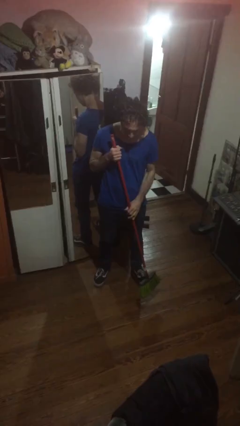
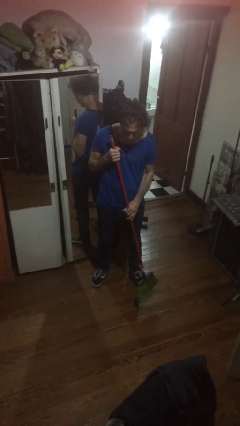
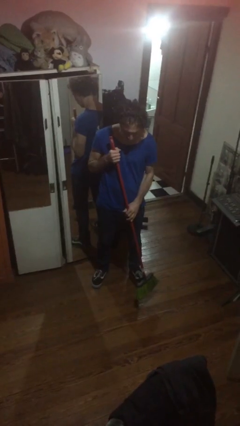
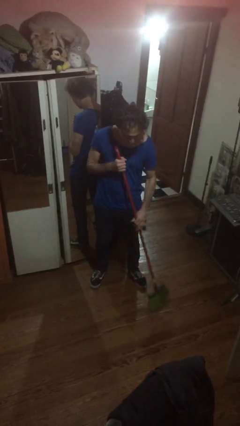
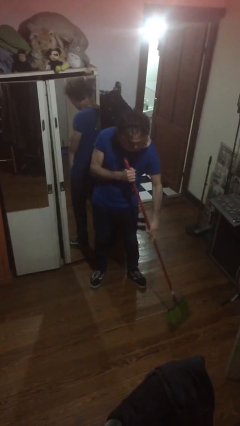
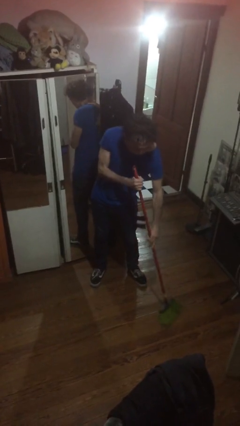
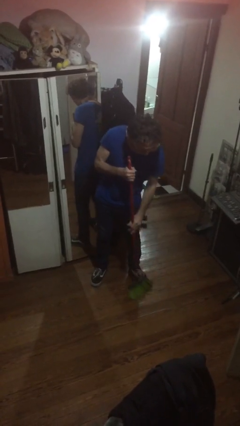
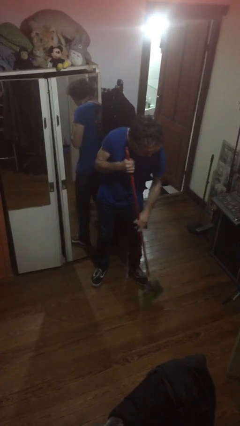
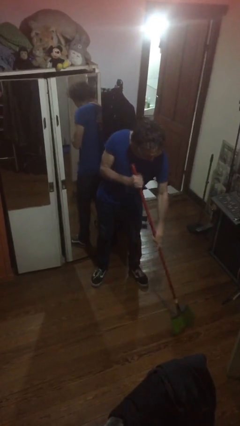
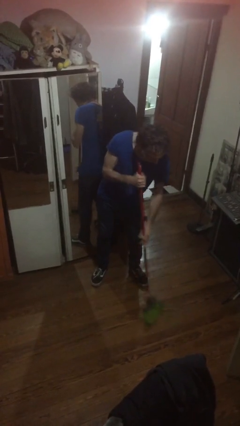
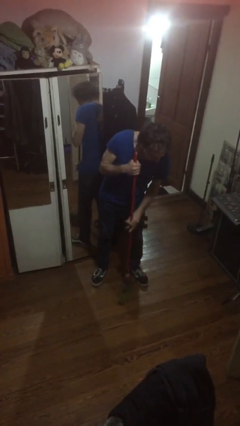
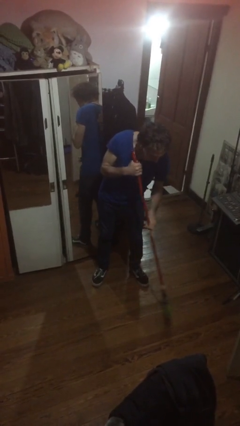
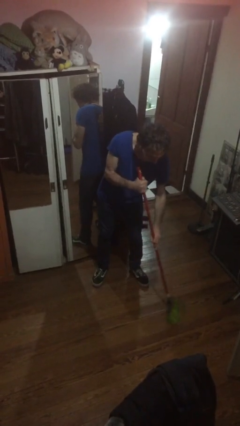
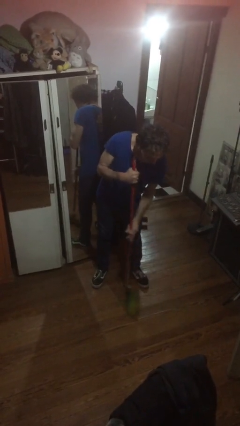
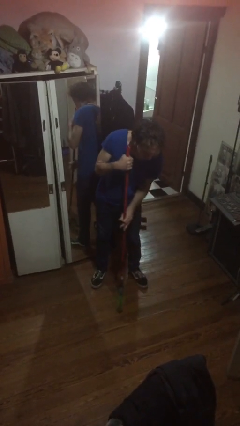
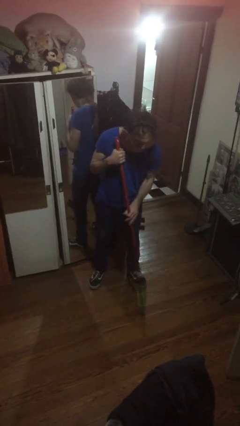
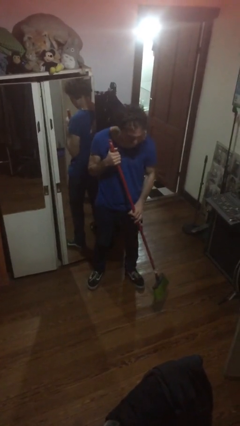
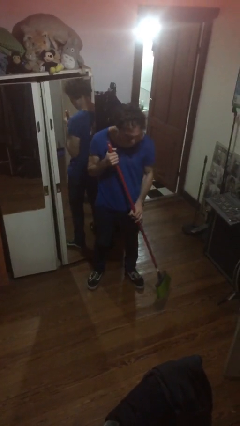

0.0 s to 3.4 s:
person sweeps floor

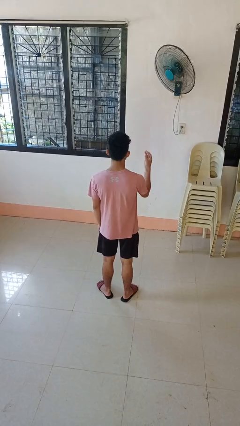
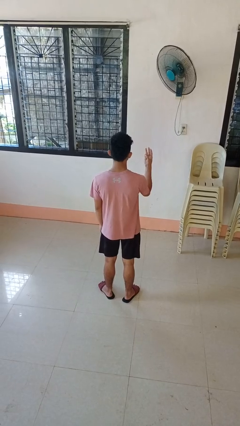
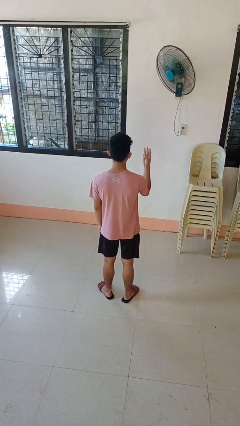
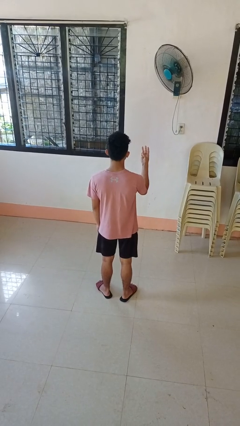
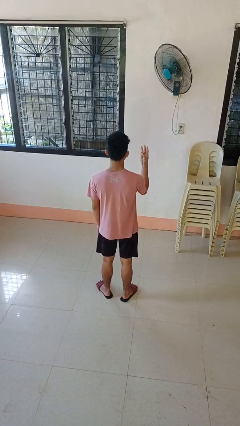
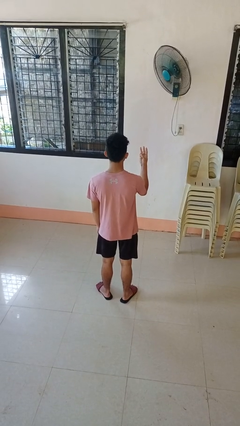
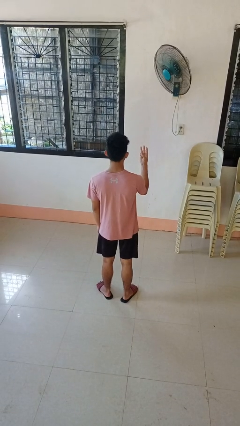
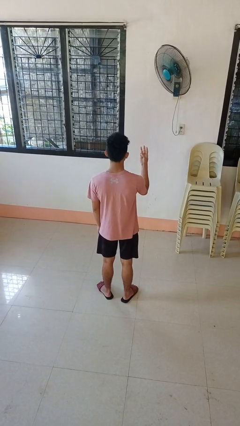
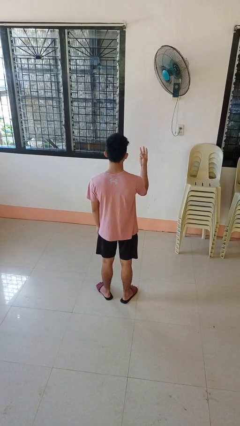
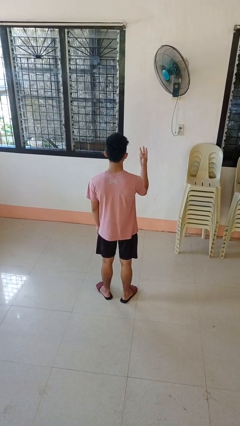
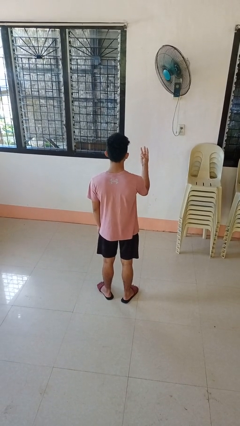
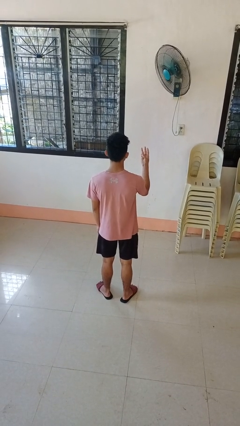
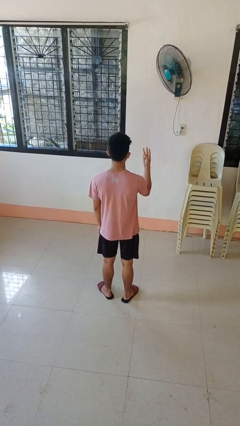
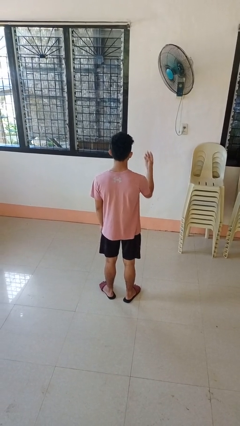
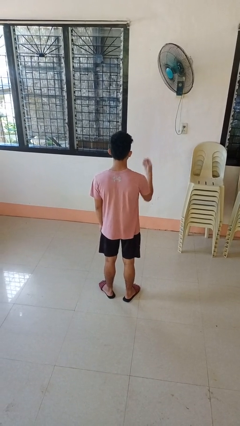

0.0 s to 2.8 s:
person gestures number three

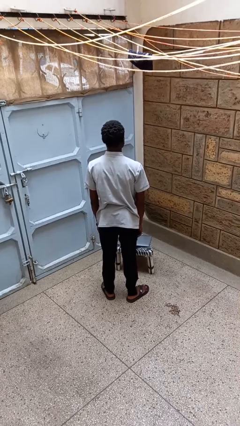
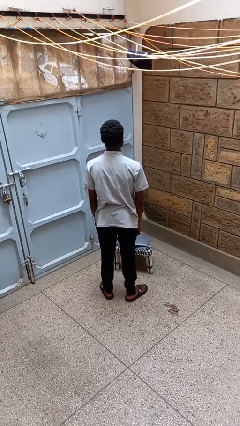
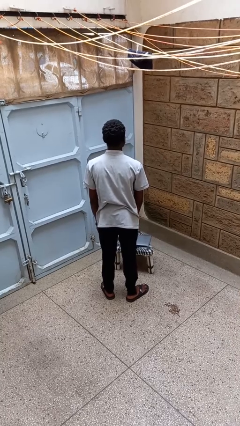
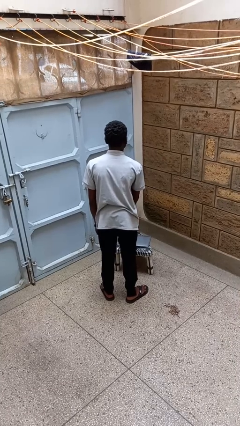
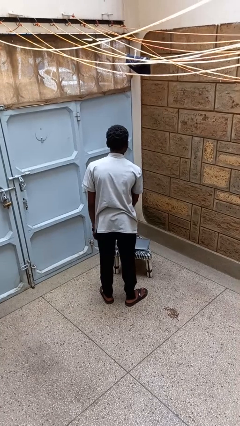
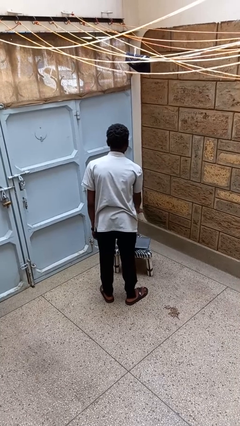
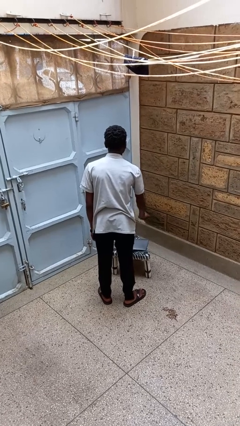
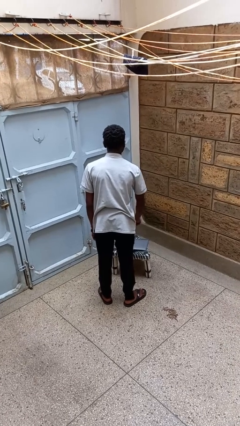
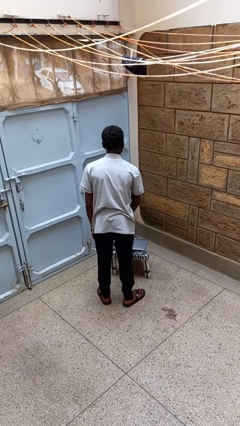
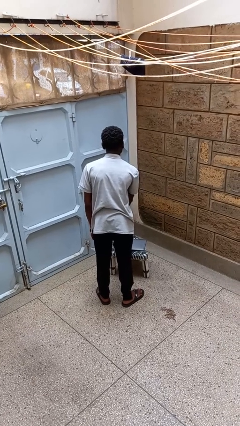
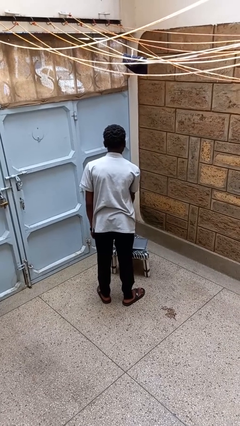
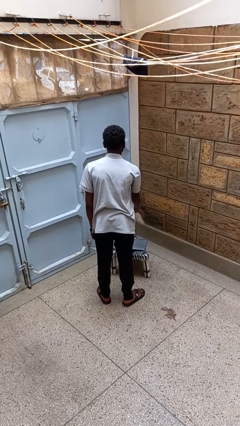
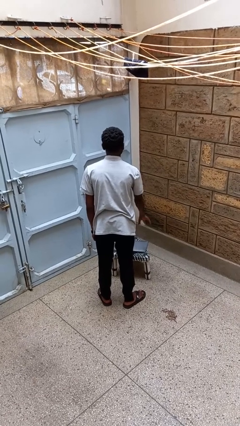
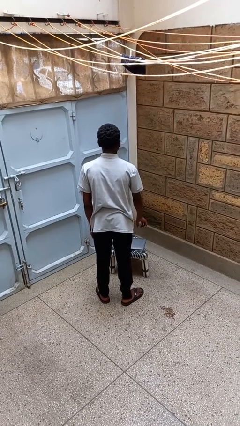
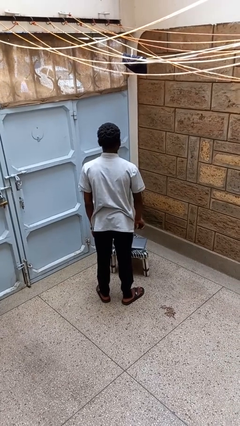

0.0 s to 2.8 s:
person waves hand over object

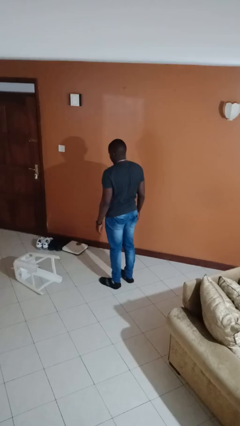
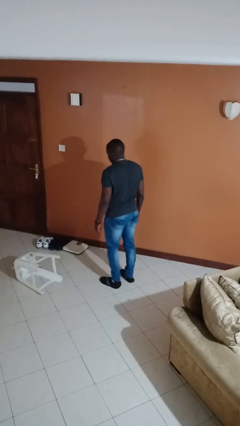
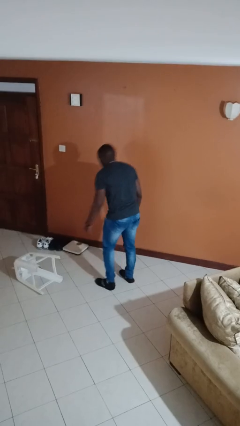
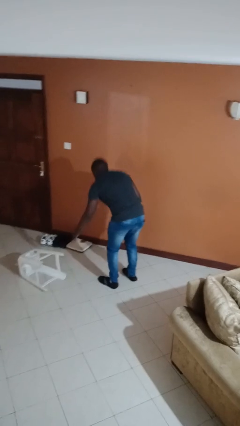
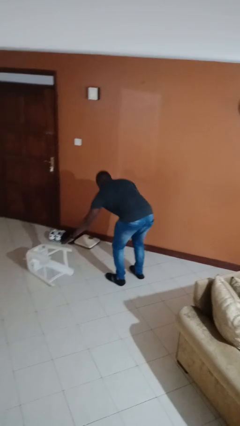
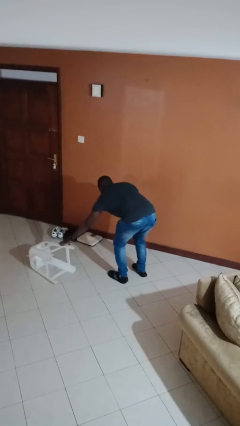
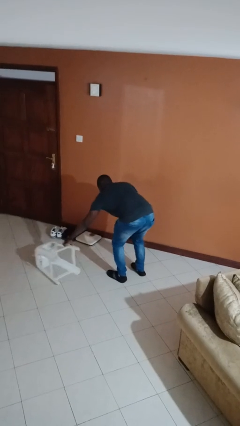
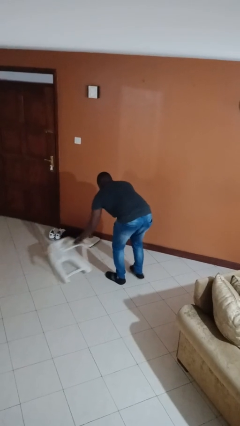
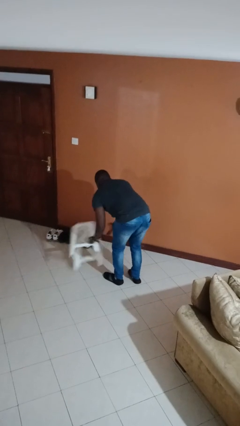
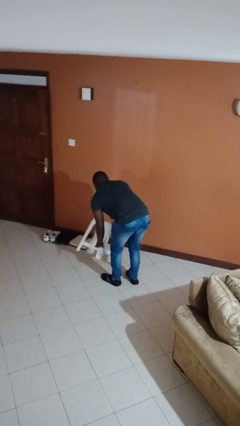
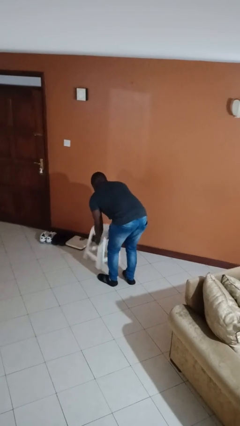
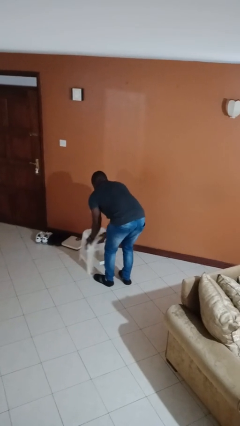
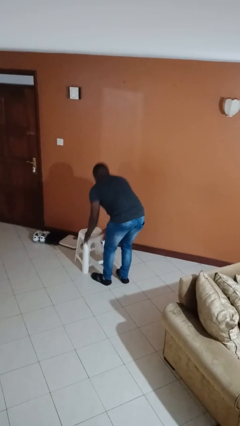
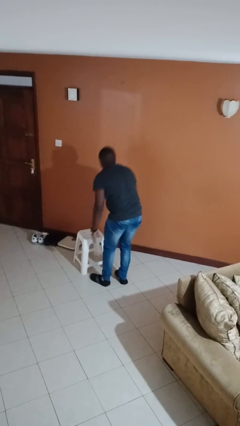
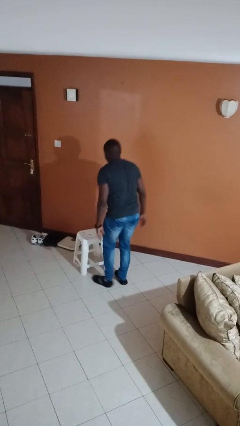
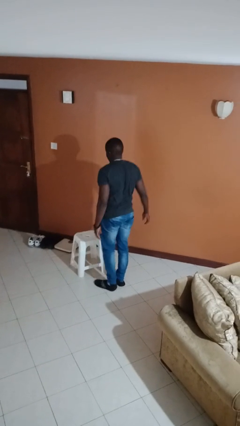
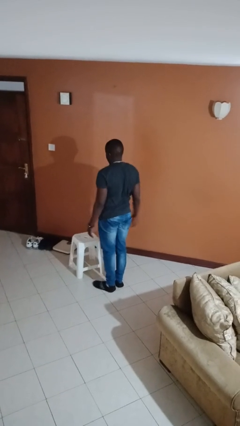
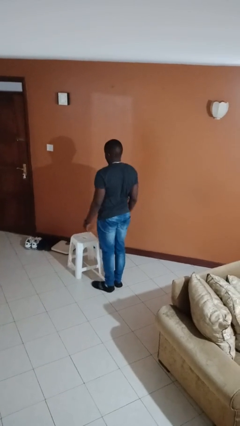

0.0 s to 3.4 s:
person sets upright furniture

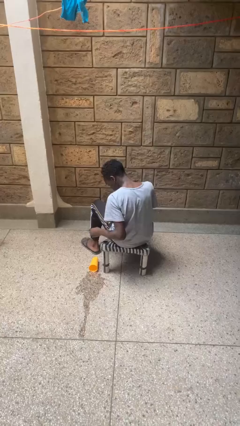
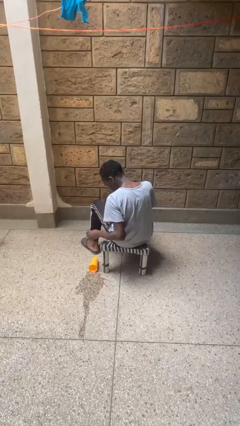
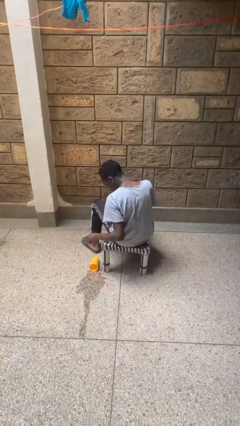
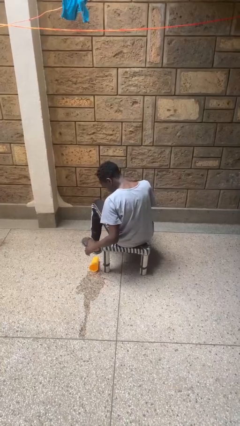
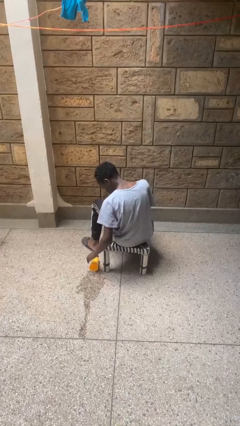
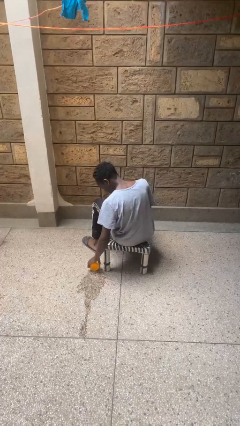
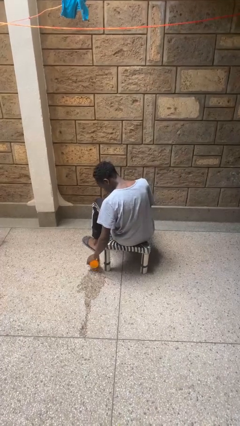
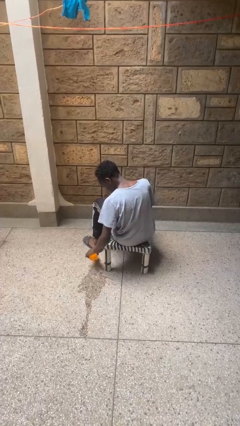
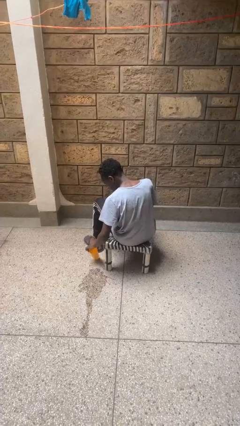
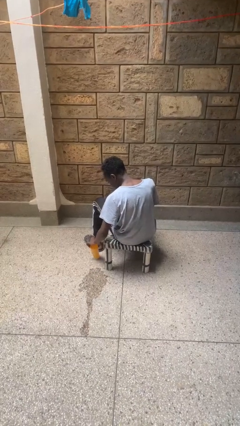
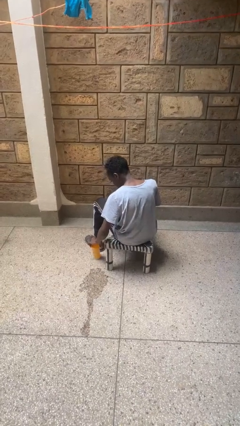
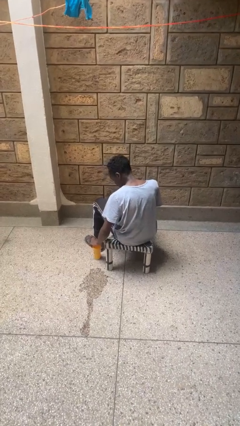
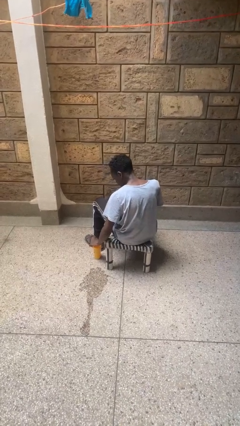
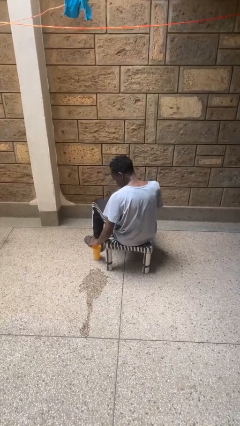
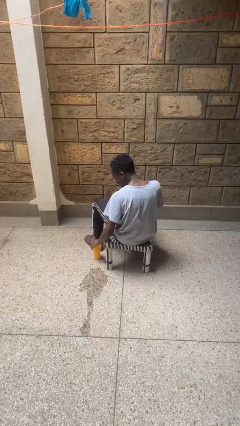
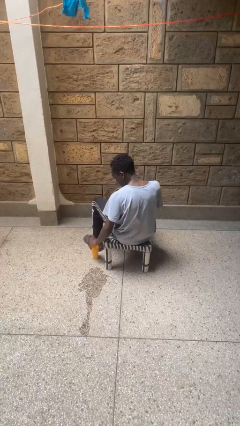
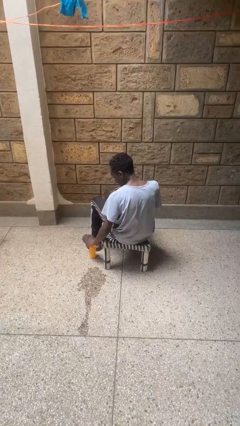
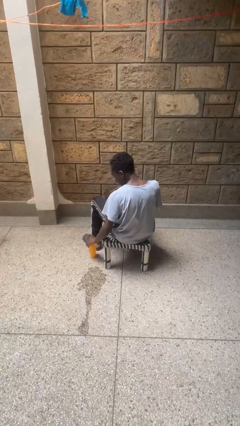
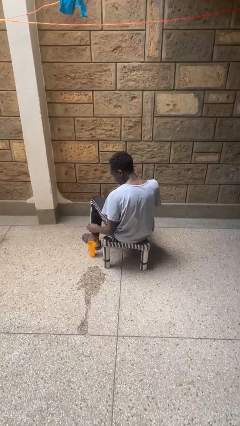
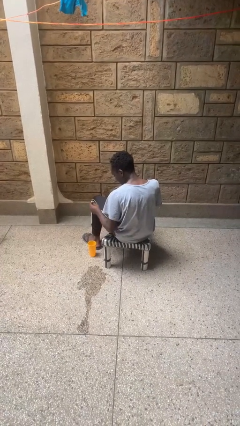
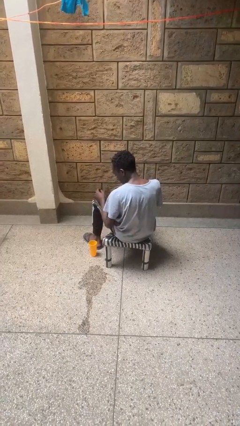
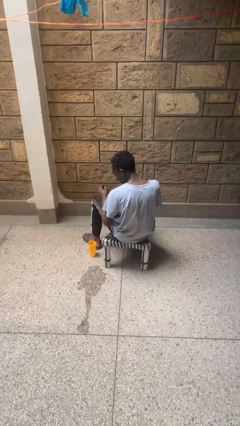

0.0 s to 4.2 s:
person sets upright glass

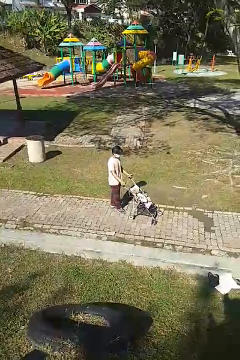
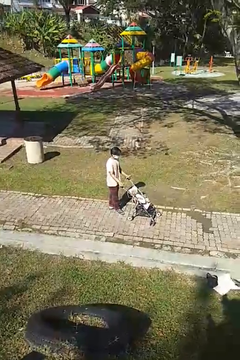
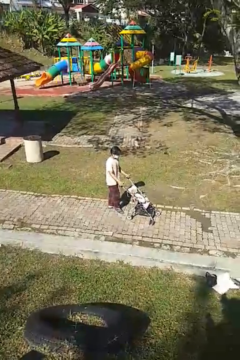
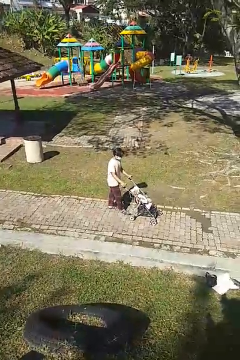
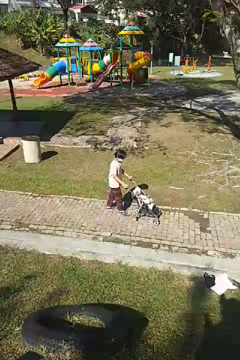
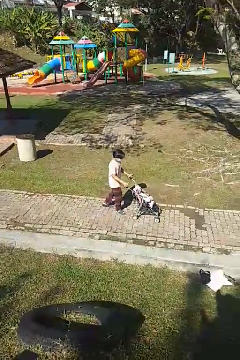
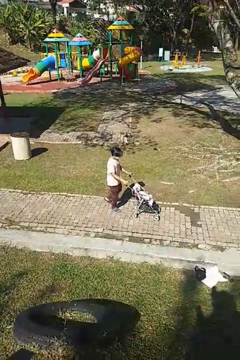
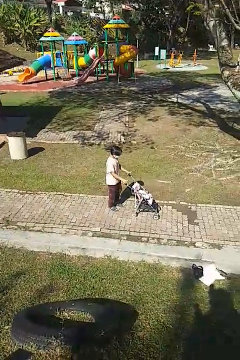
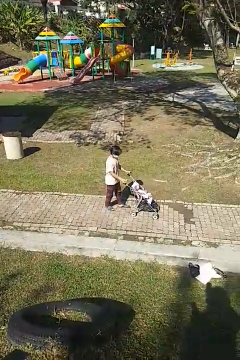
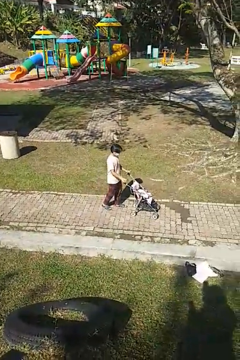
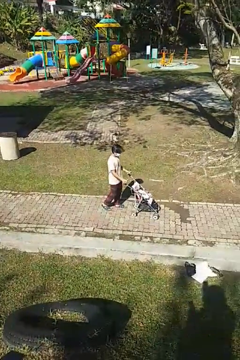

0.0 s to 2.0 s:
person pushes wheeled cart
